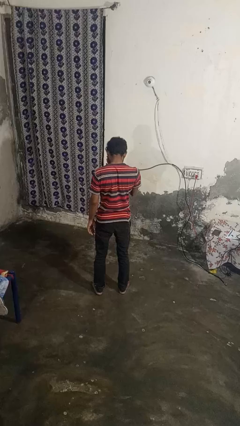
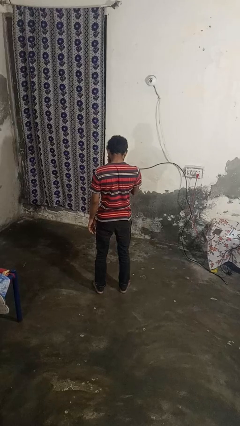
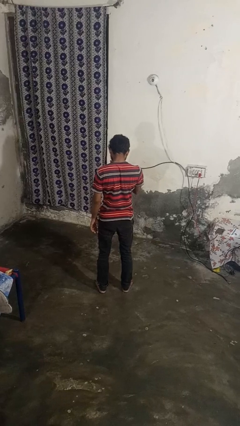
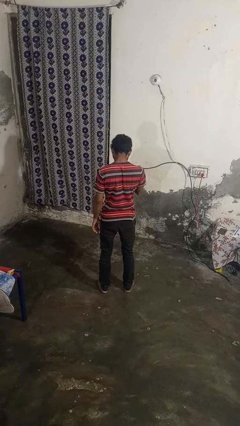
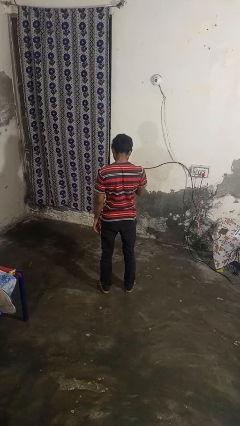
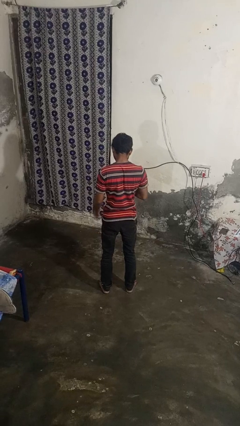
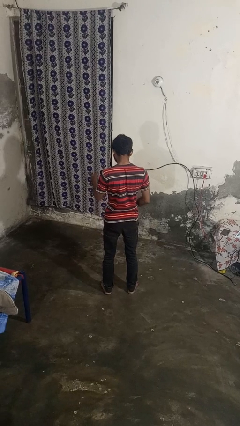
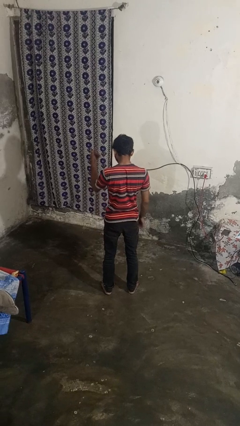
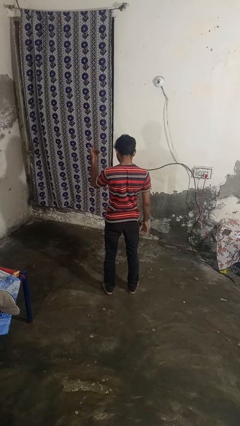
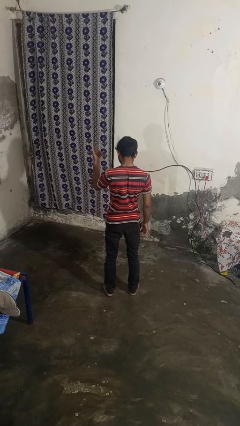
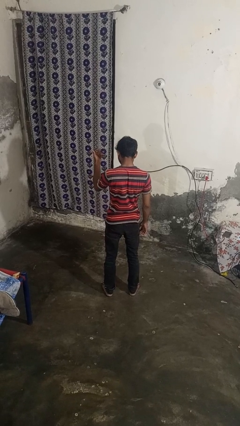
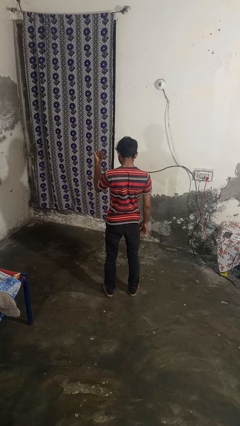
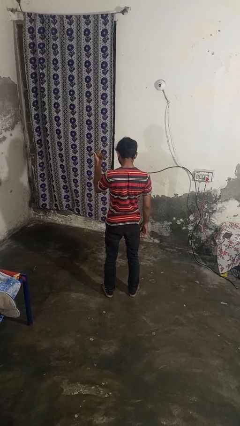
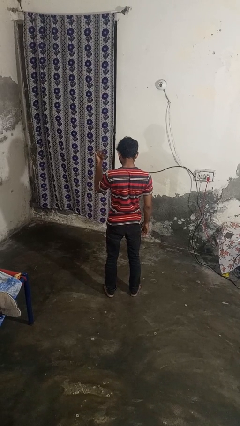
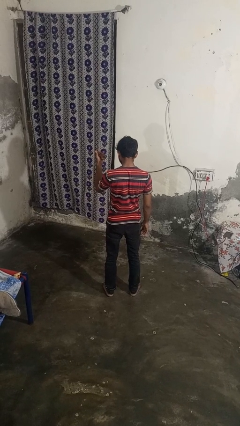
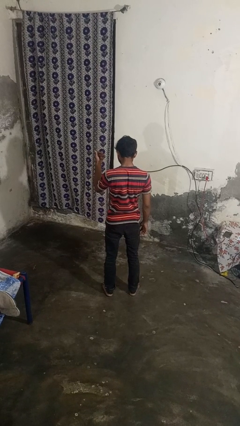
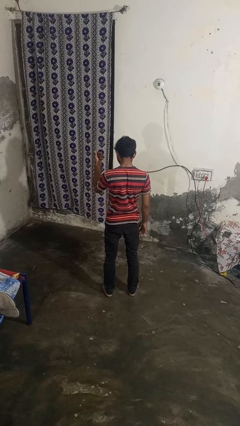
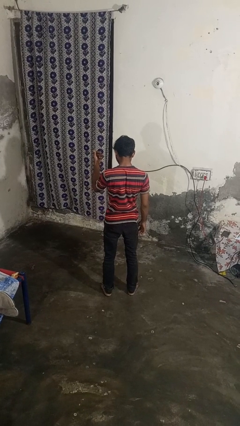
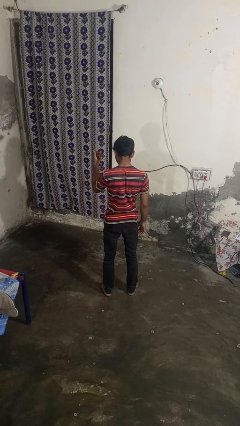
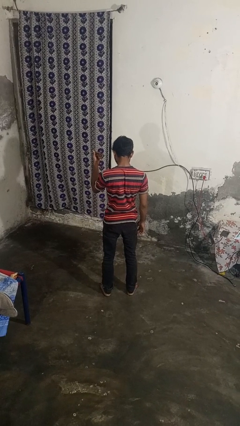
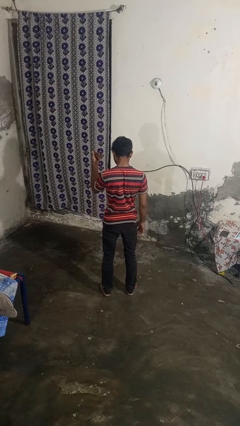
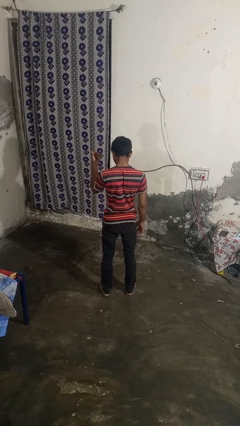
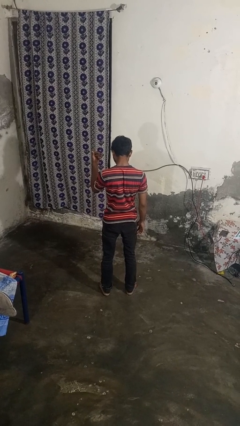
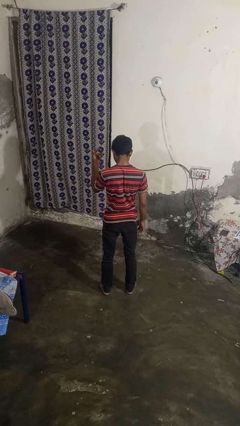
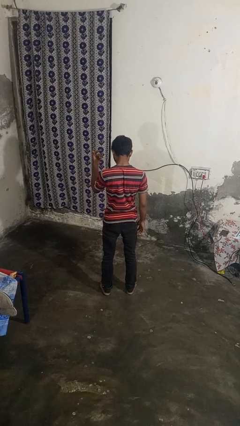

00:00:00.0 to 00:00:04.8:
person gestures come here

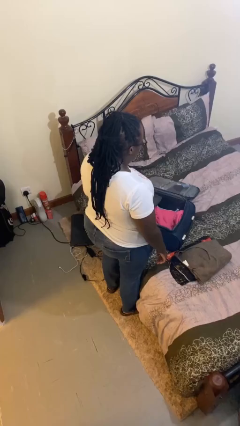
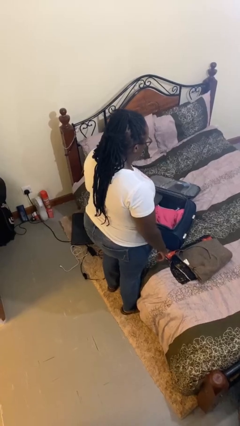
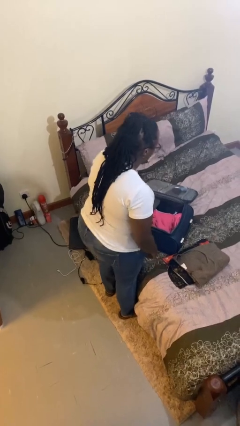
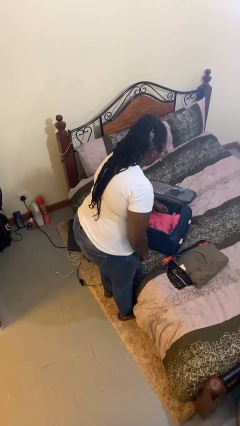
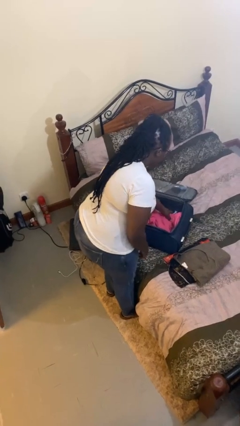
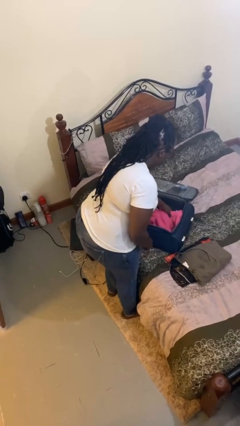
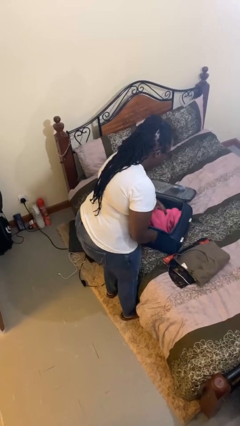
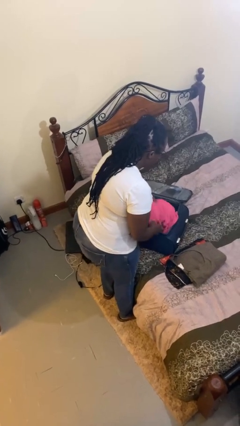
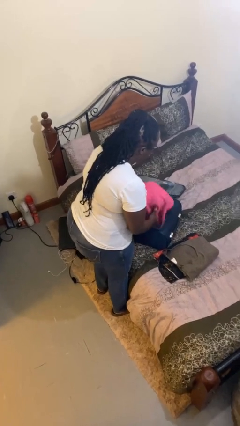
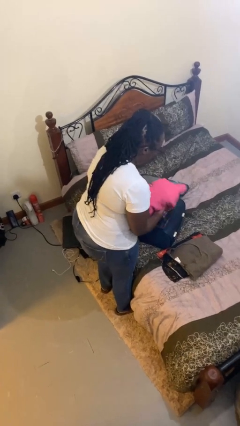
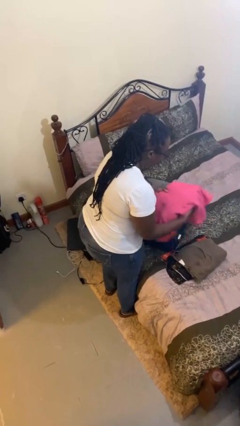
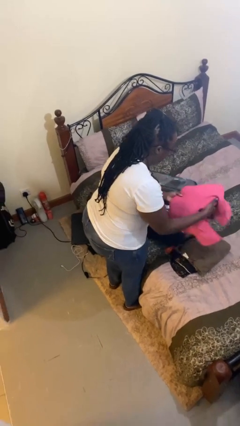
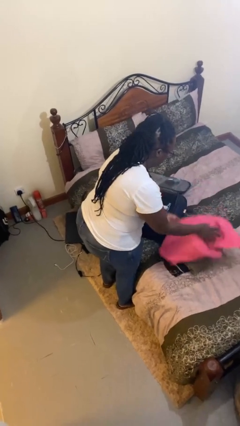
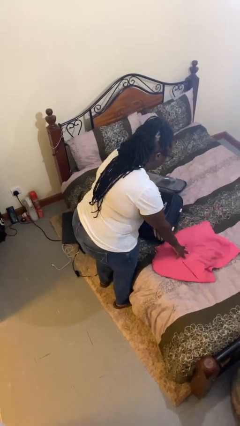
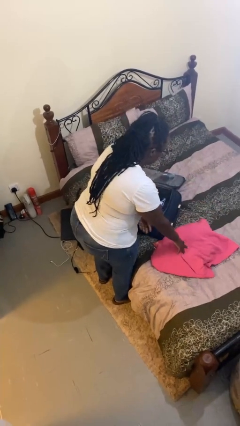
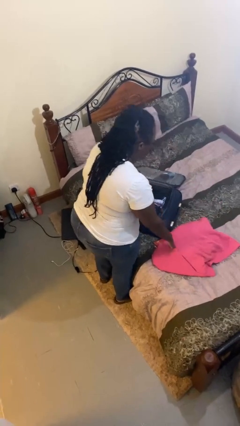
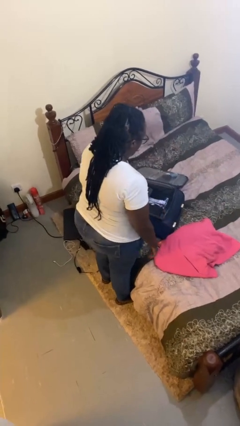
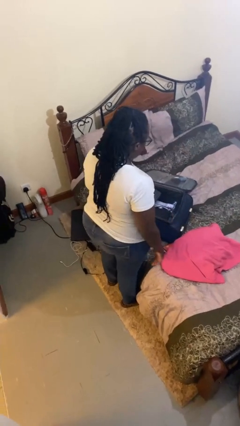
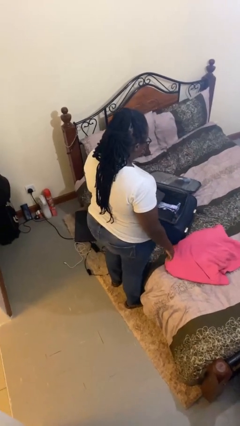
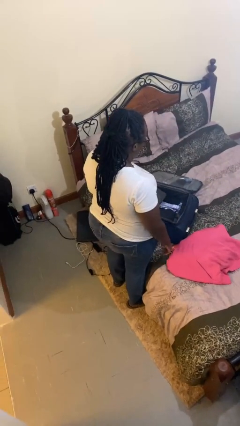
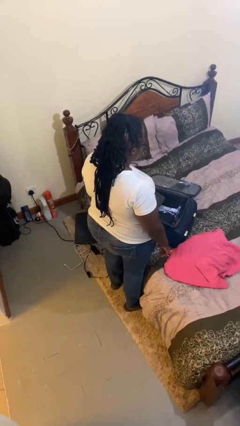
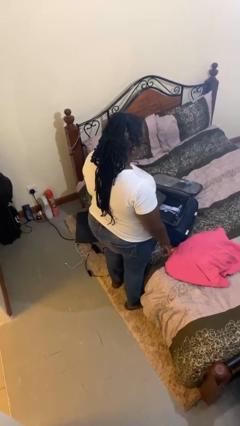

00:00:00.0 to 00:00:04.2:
person unloads clothes from suitcase

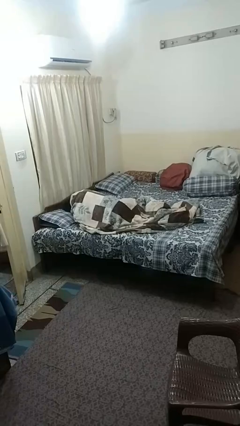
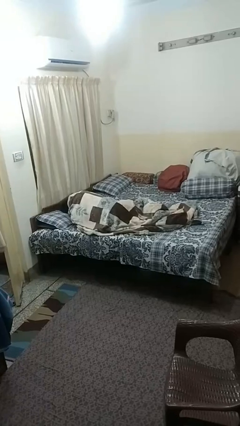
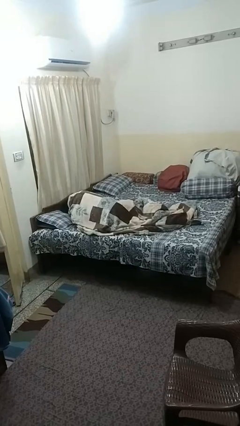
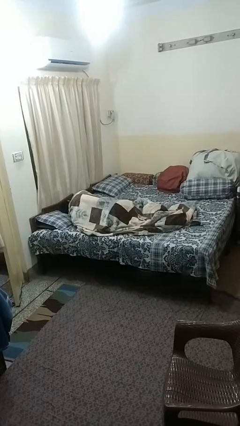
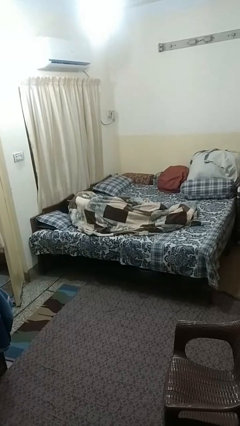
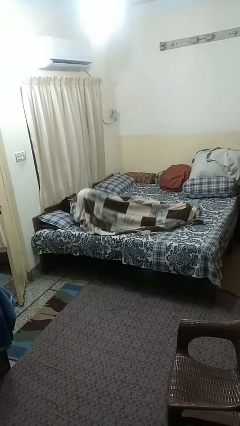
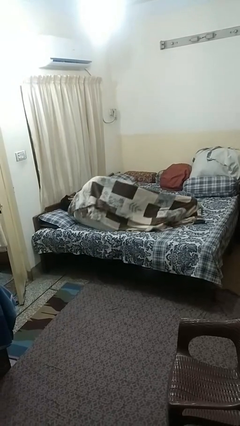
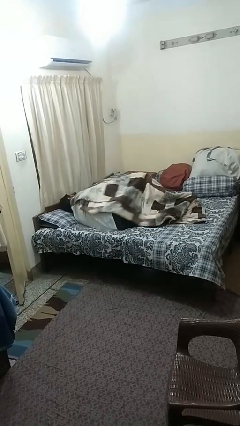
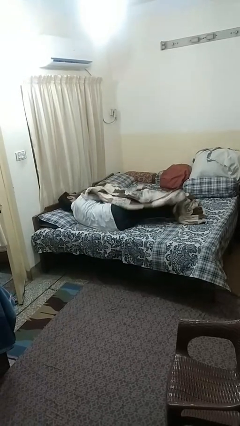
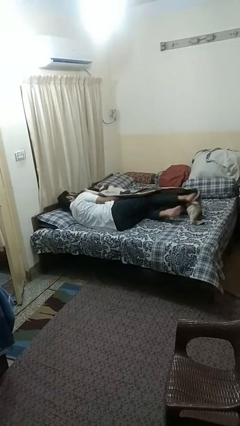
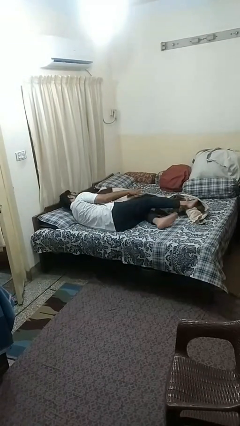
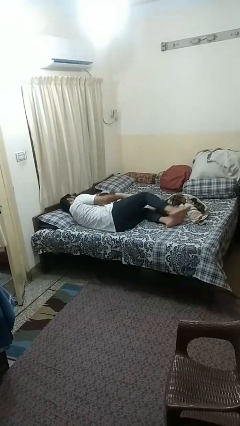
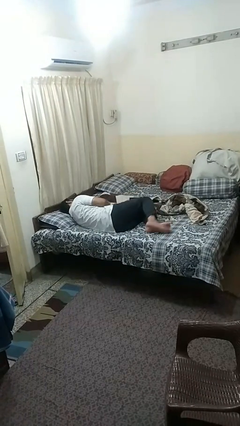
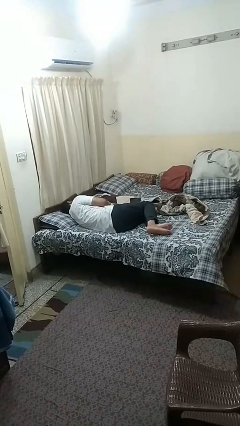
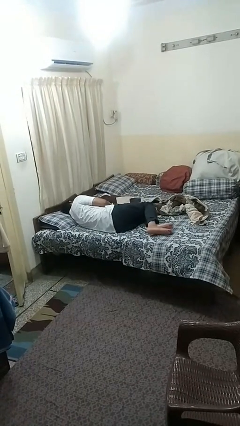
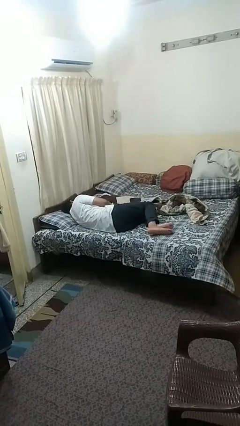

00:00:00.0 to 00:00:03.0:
person uncovers with blanket

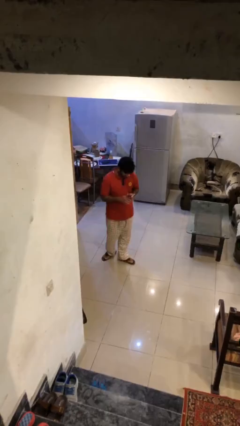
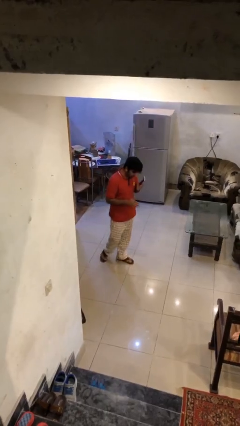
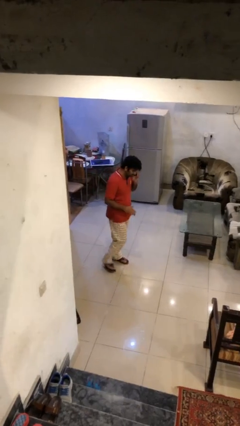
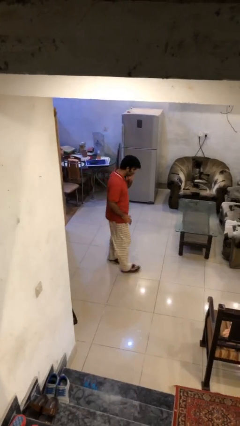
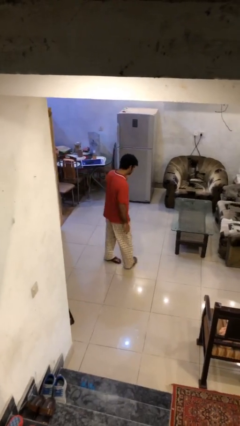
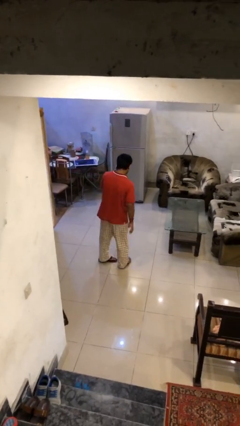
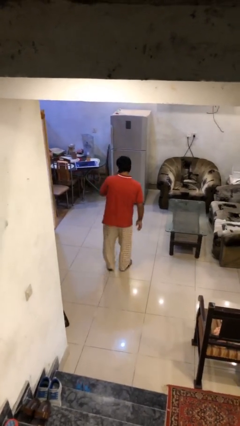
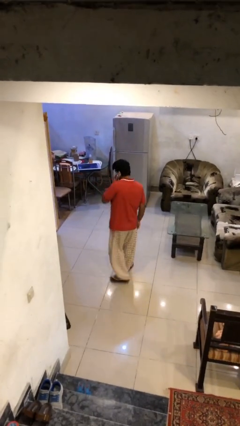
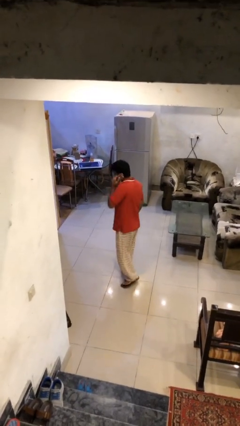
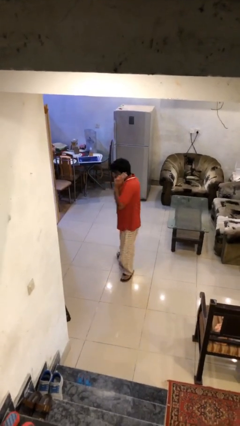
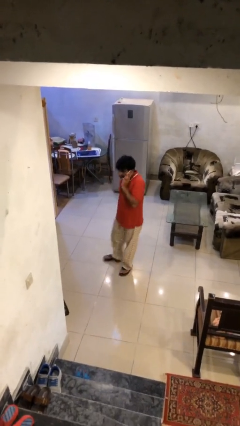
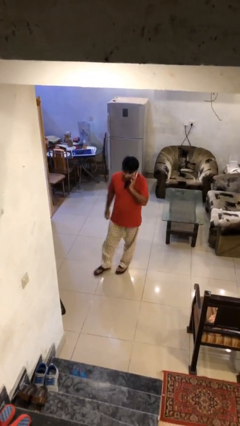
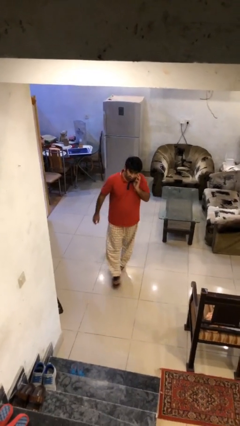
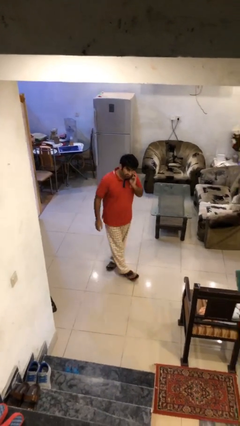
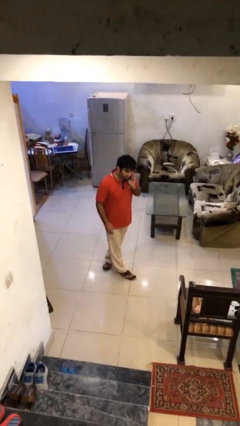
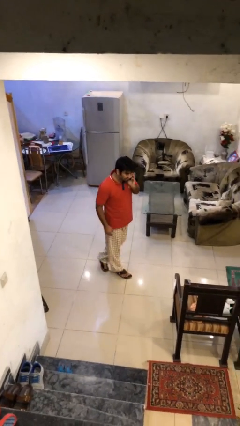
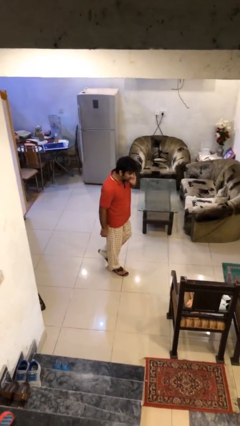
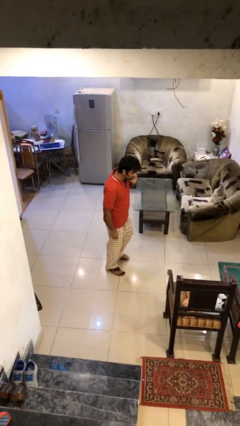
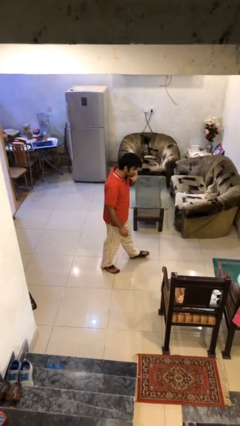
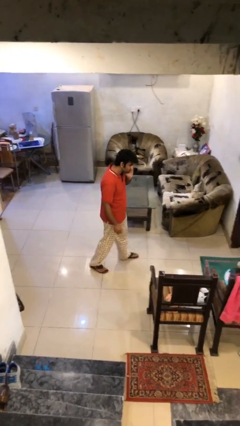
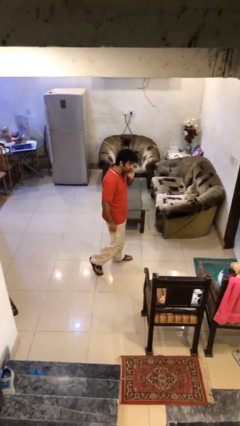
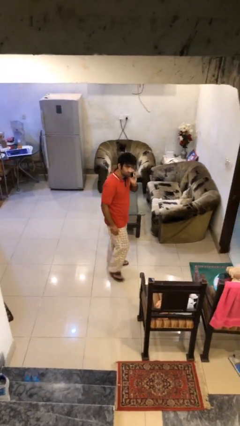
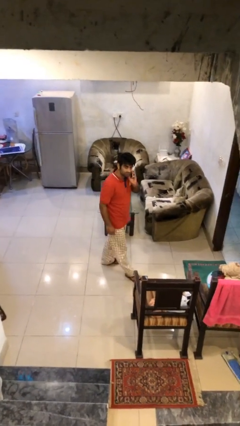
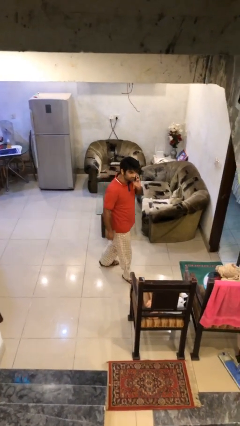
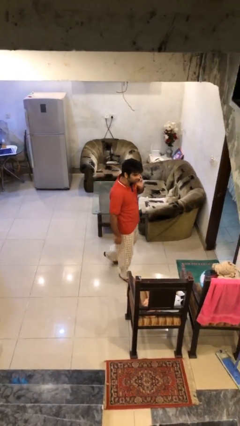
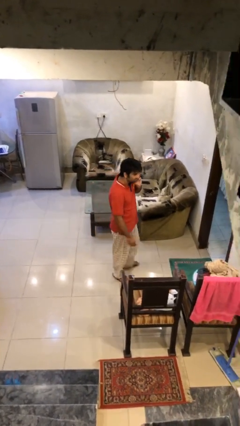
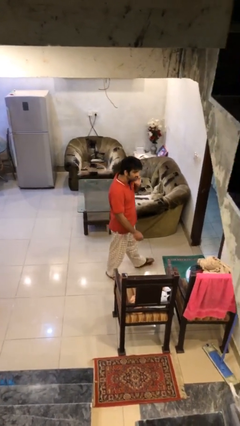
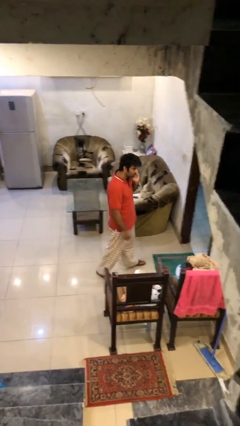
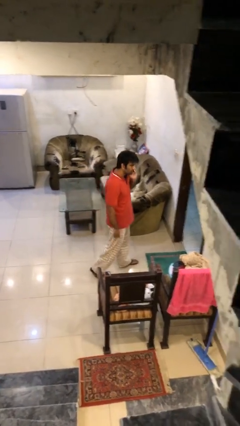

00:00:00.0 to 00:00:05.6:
person talks on phone

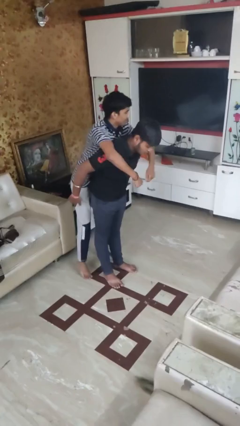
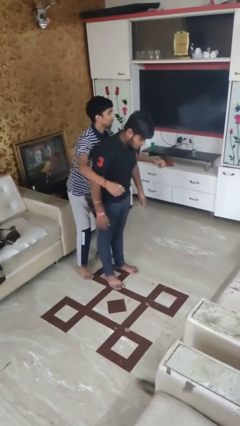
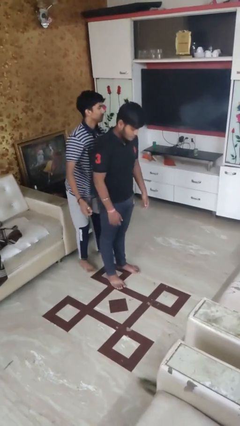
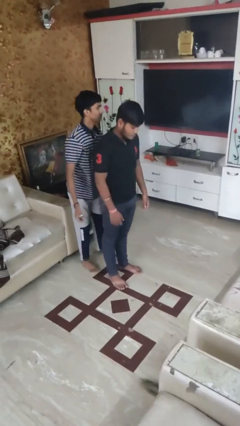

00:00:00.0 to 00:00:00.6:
person puts down person
